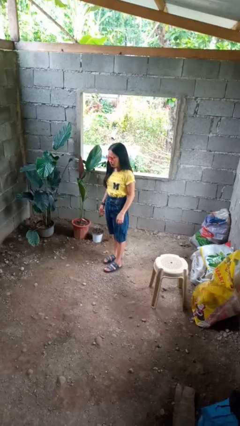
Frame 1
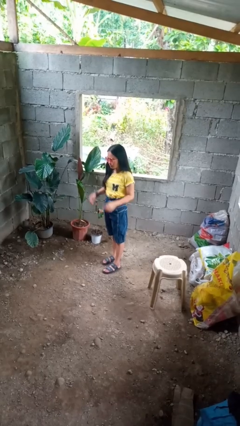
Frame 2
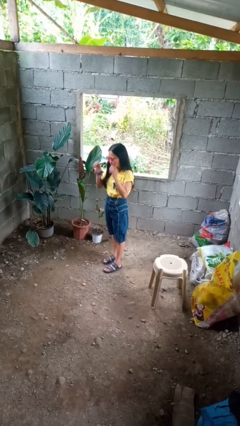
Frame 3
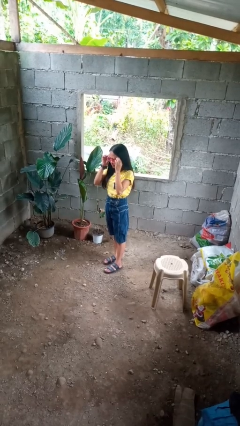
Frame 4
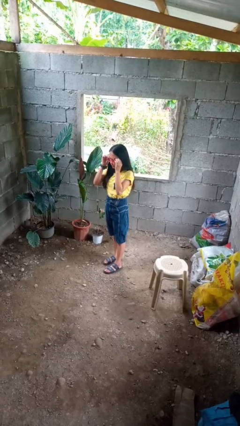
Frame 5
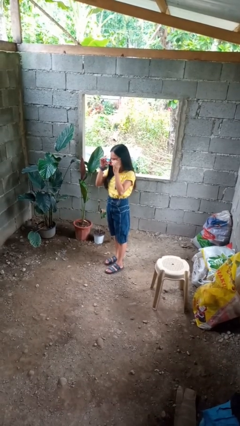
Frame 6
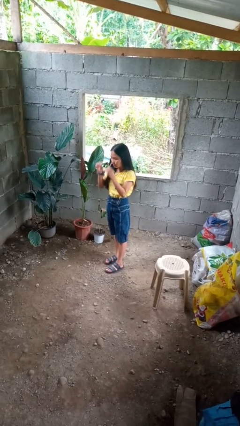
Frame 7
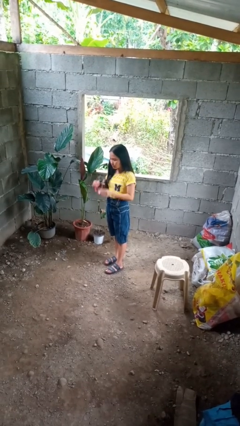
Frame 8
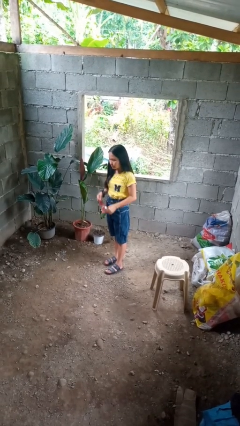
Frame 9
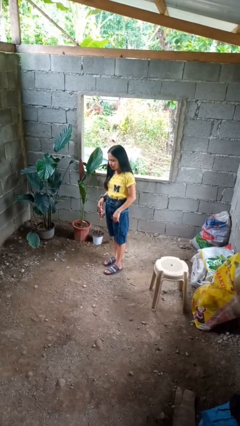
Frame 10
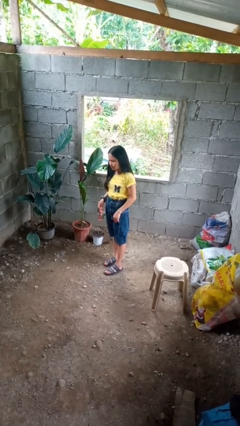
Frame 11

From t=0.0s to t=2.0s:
person takes off sunglasses

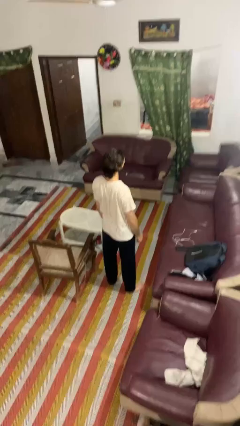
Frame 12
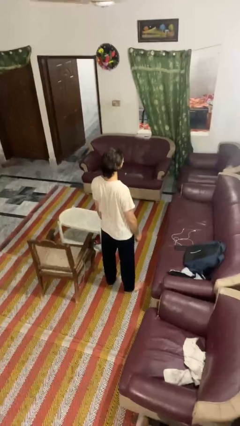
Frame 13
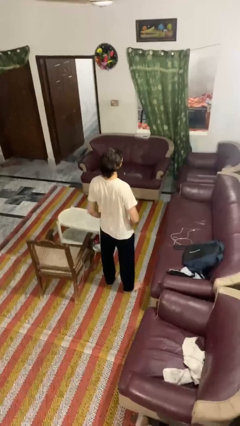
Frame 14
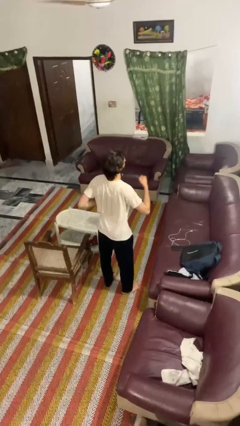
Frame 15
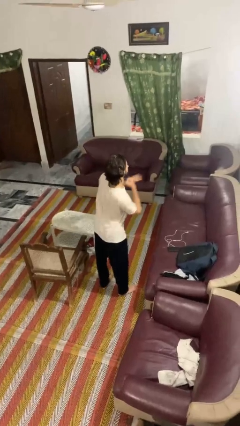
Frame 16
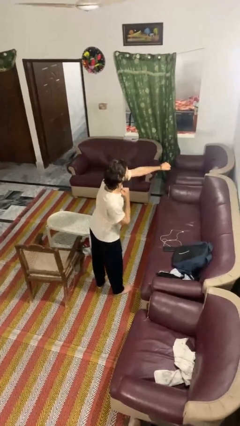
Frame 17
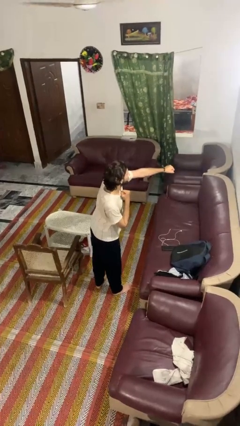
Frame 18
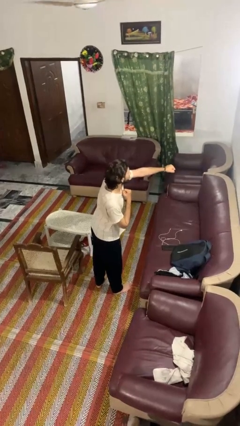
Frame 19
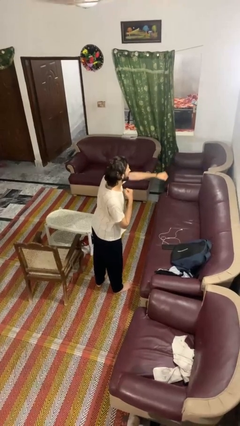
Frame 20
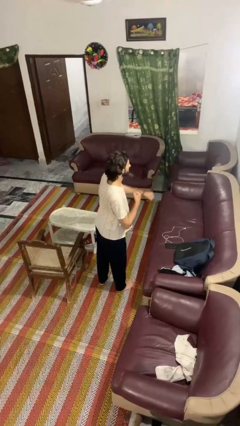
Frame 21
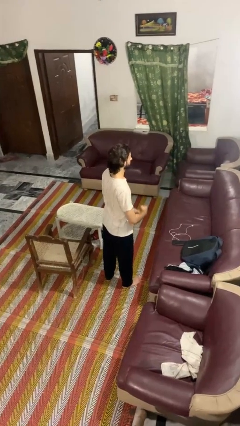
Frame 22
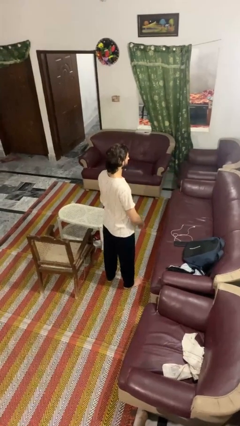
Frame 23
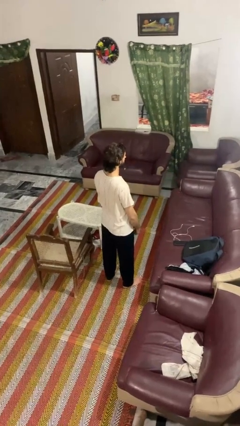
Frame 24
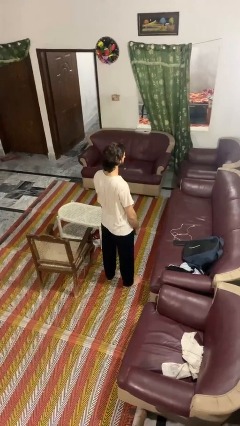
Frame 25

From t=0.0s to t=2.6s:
person punches

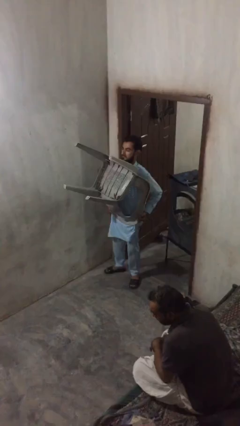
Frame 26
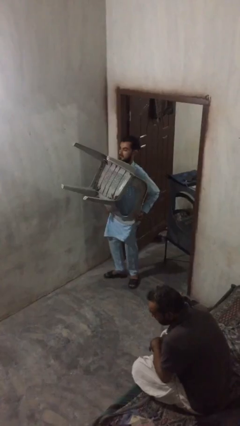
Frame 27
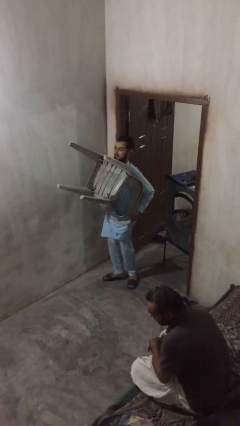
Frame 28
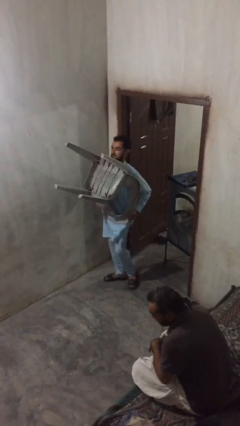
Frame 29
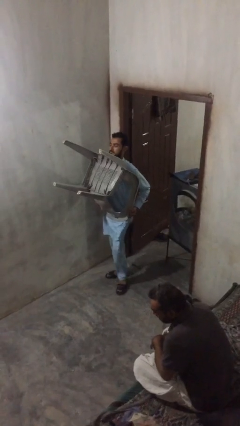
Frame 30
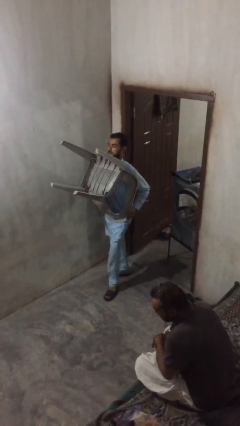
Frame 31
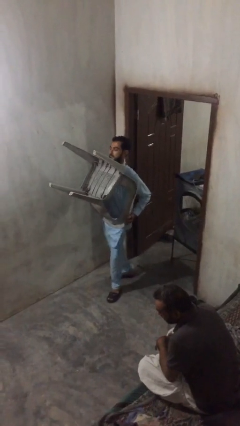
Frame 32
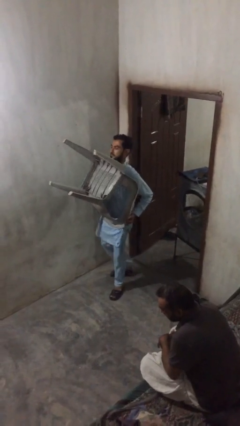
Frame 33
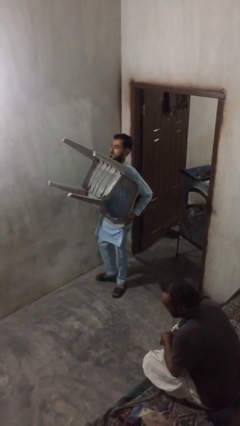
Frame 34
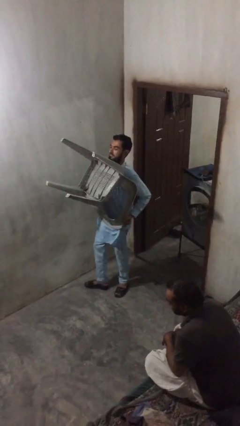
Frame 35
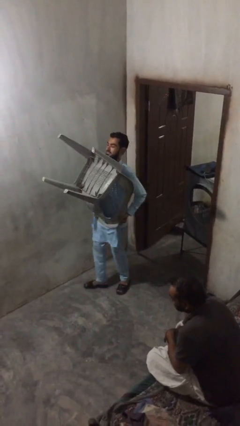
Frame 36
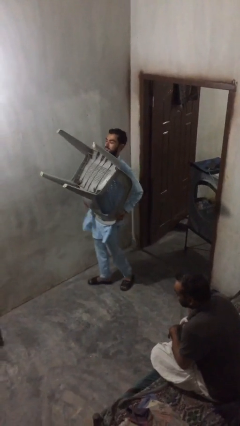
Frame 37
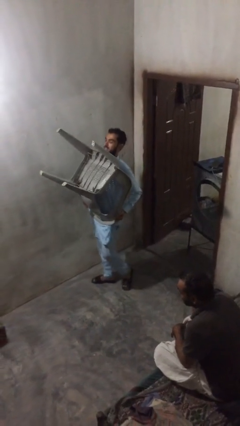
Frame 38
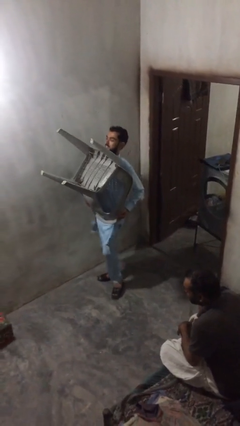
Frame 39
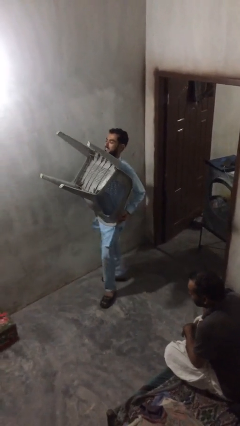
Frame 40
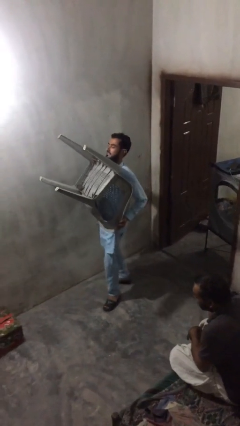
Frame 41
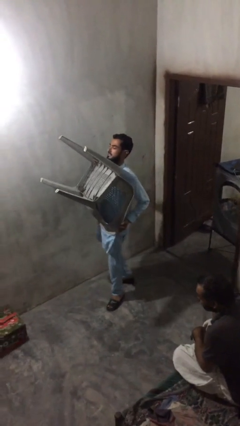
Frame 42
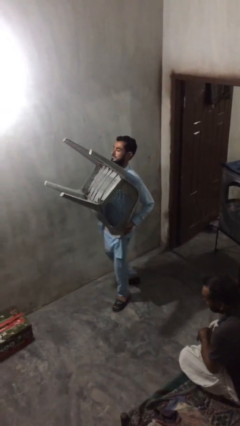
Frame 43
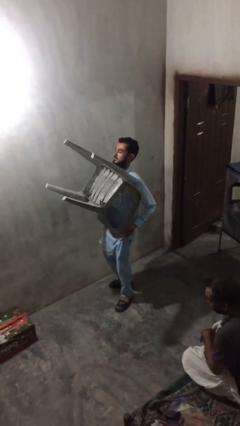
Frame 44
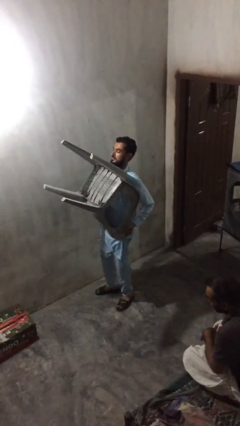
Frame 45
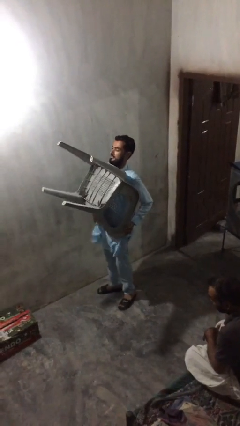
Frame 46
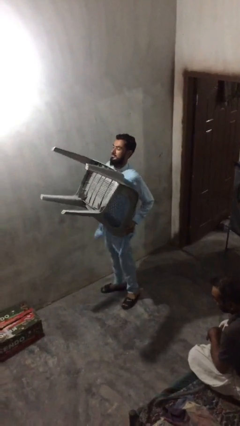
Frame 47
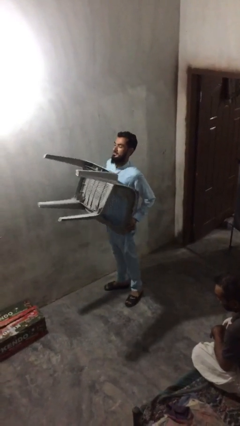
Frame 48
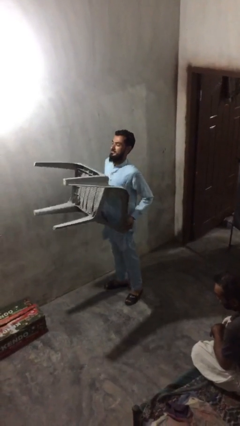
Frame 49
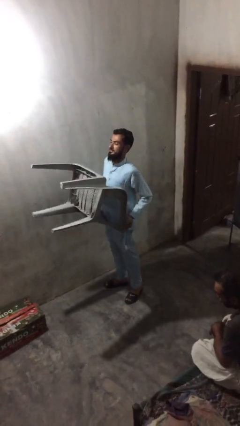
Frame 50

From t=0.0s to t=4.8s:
person carries heavy object

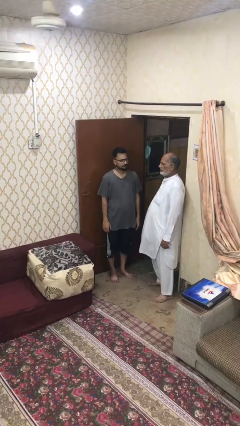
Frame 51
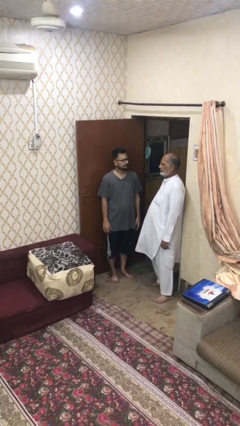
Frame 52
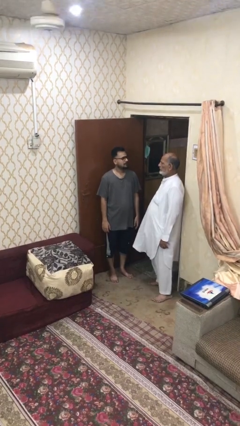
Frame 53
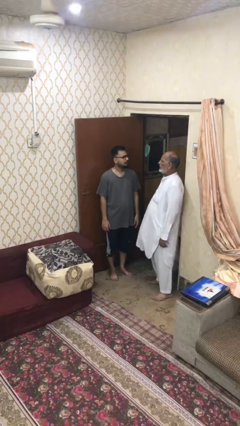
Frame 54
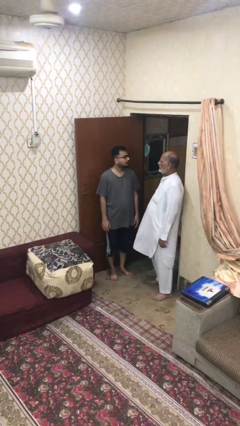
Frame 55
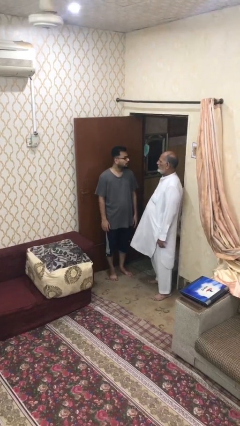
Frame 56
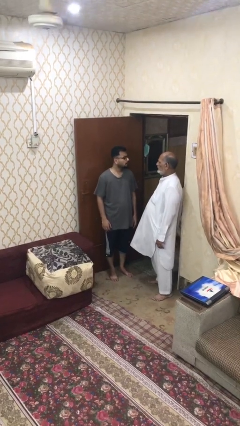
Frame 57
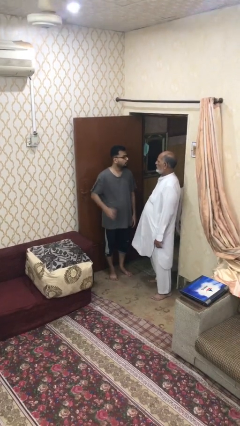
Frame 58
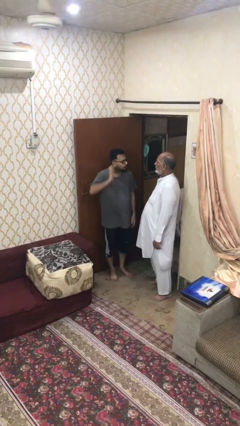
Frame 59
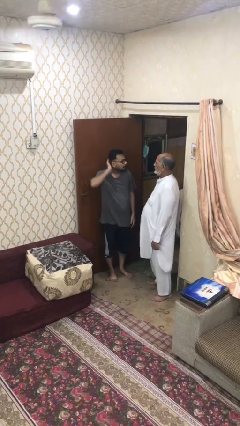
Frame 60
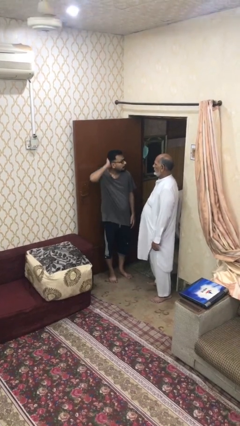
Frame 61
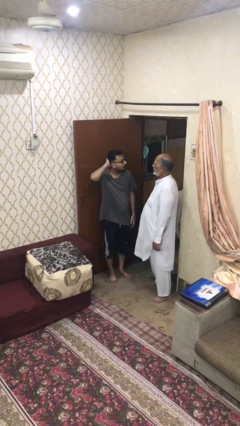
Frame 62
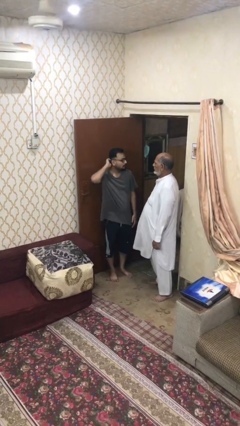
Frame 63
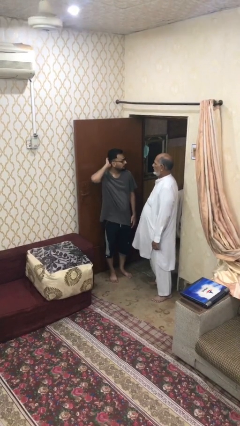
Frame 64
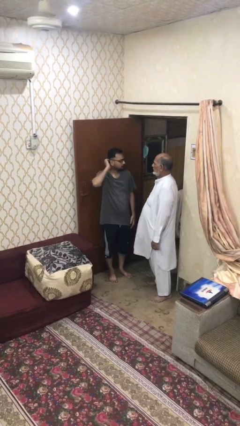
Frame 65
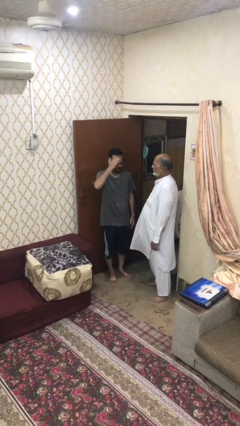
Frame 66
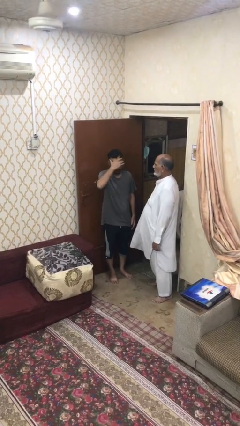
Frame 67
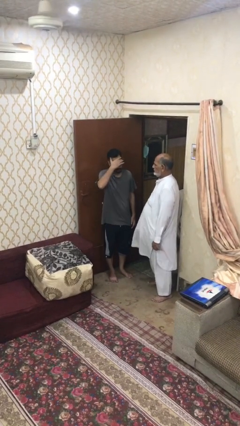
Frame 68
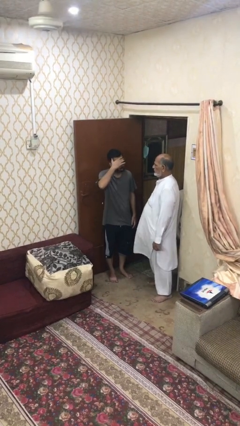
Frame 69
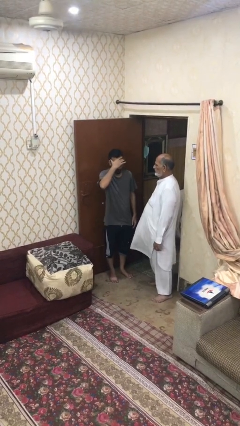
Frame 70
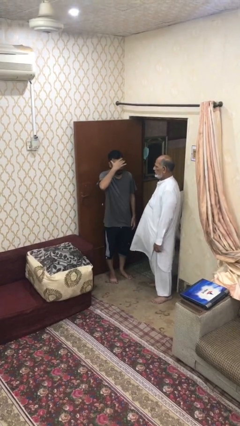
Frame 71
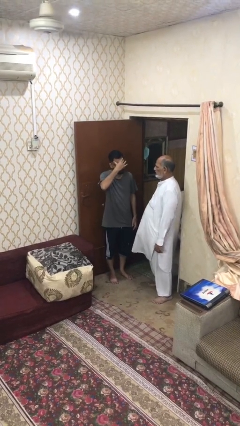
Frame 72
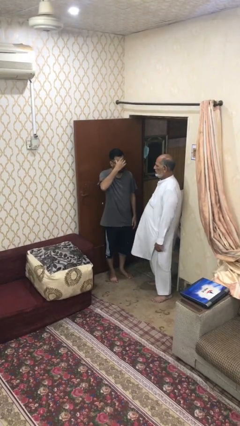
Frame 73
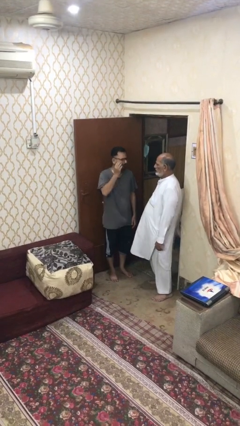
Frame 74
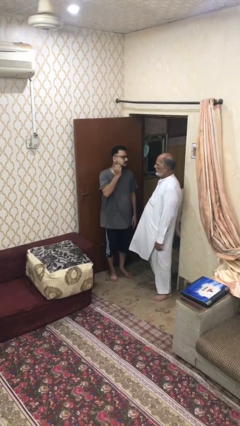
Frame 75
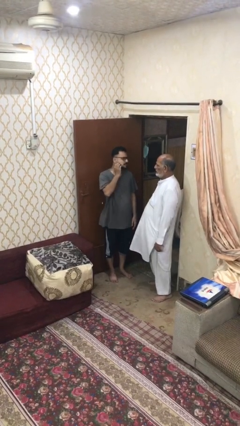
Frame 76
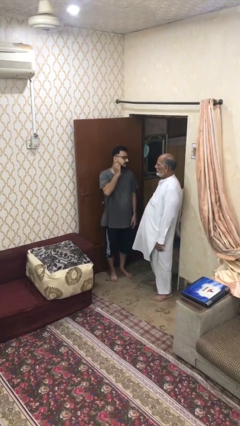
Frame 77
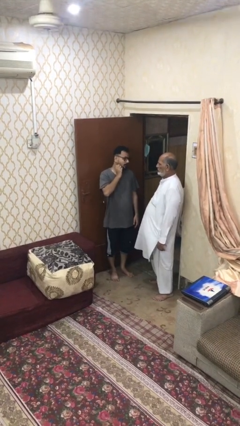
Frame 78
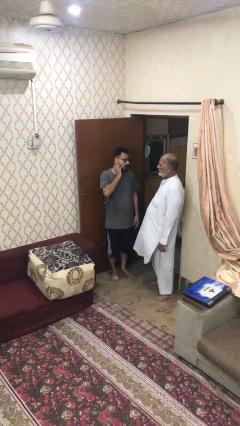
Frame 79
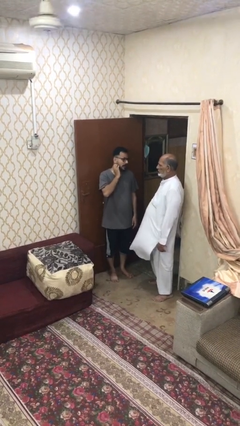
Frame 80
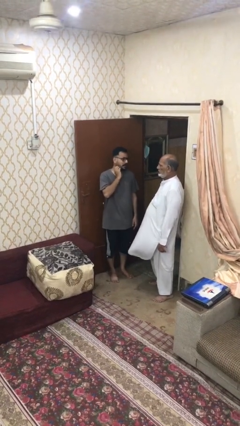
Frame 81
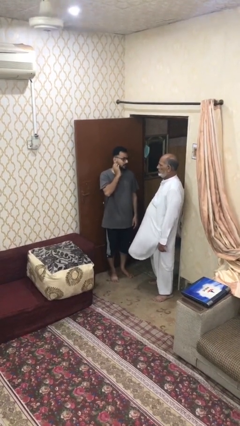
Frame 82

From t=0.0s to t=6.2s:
person talks to person

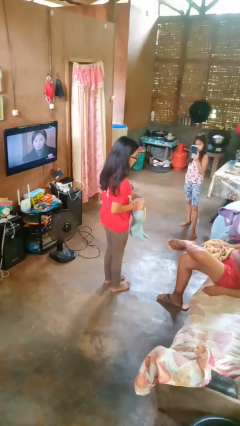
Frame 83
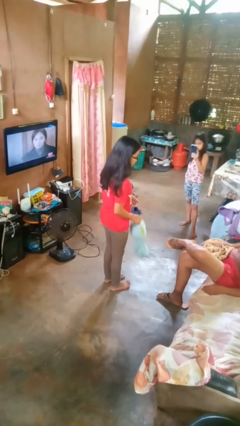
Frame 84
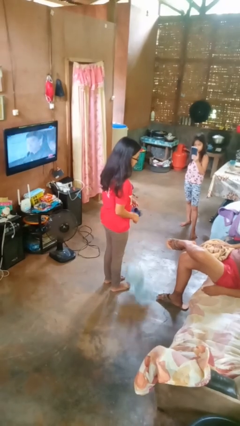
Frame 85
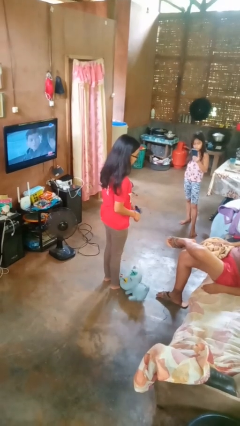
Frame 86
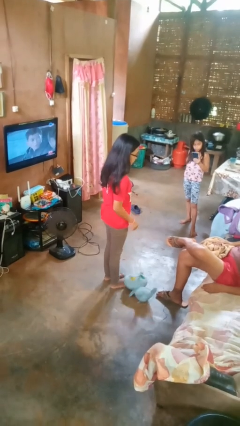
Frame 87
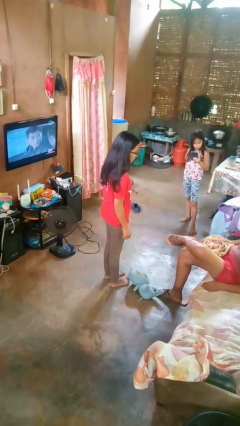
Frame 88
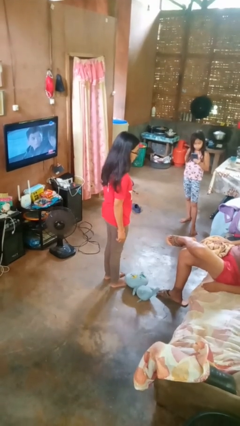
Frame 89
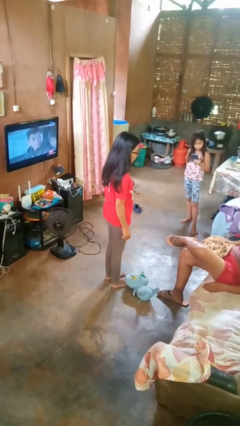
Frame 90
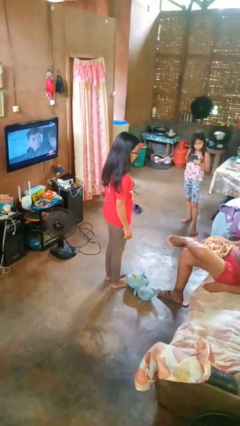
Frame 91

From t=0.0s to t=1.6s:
person drops object

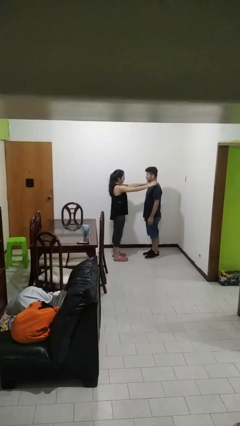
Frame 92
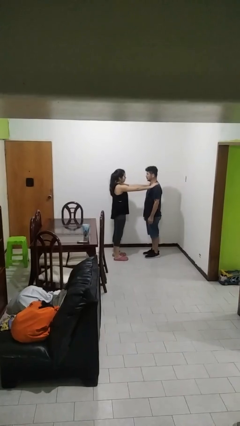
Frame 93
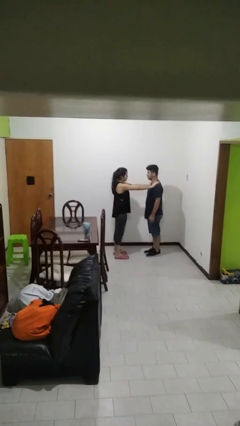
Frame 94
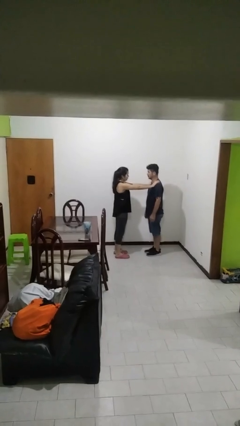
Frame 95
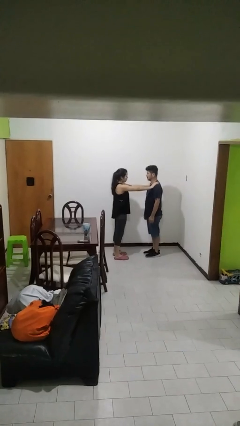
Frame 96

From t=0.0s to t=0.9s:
person grabs person by shoulder
